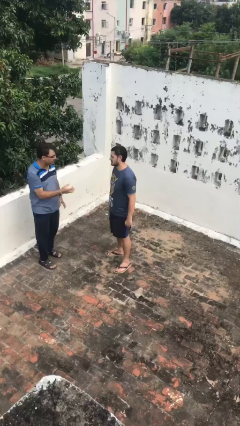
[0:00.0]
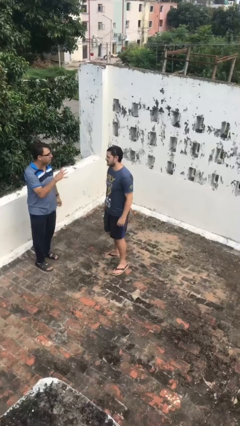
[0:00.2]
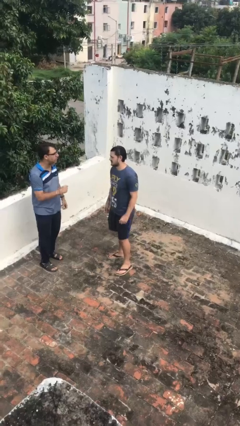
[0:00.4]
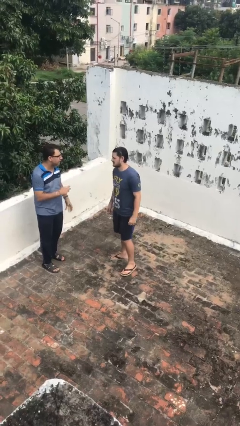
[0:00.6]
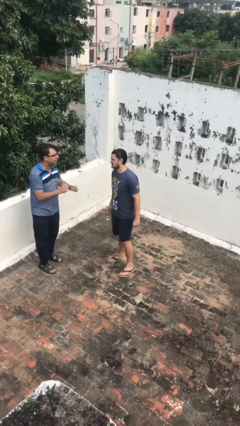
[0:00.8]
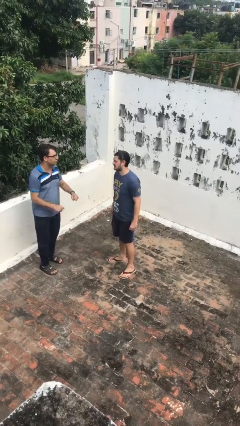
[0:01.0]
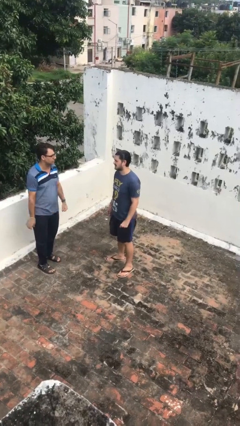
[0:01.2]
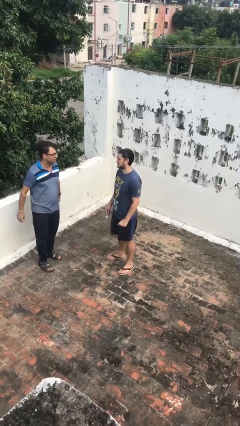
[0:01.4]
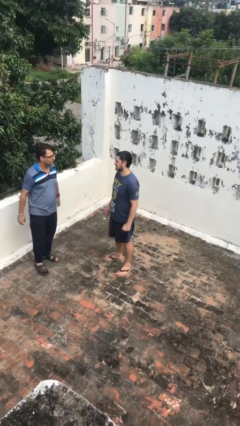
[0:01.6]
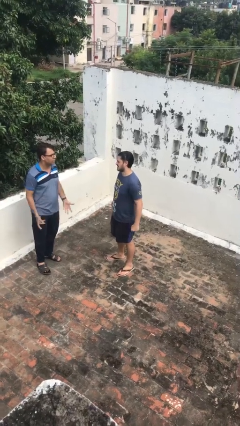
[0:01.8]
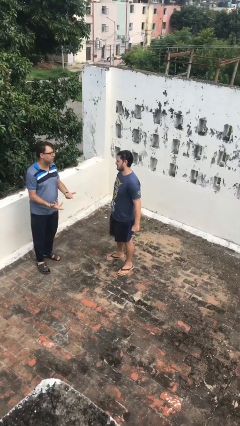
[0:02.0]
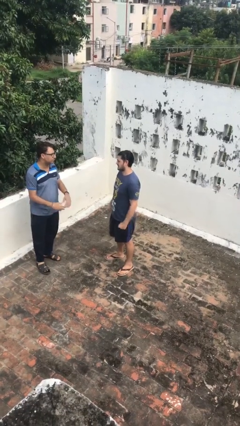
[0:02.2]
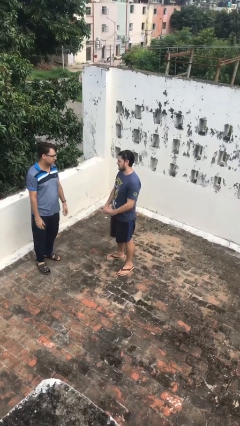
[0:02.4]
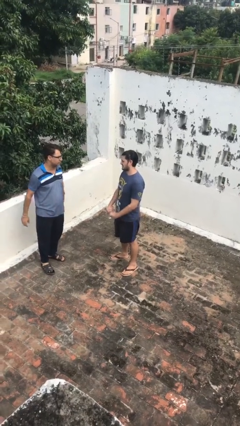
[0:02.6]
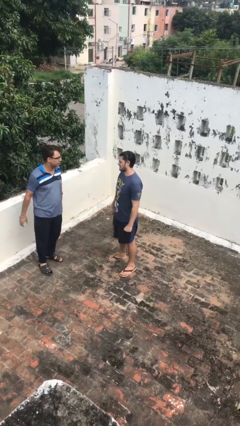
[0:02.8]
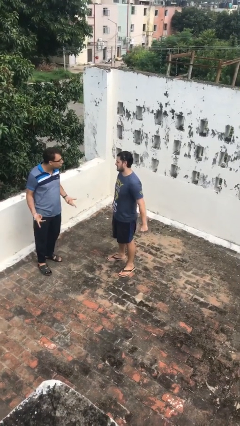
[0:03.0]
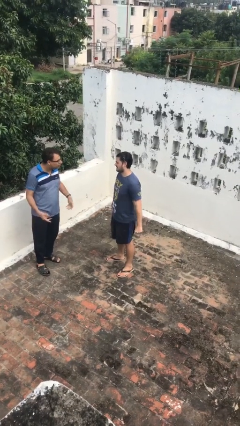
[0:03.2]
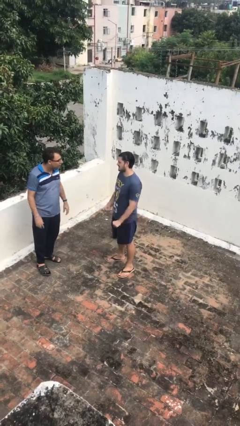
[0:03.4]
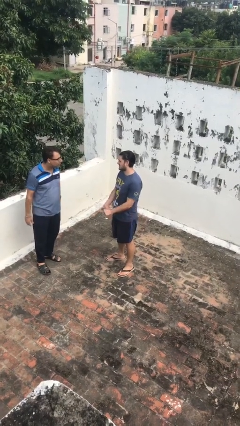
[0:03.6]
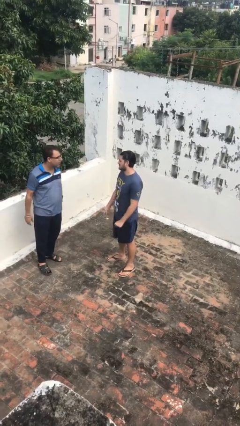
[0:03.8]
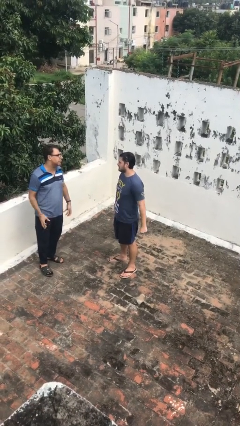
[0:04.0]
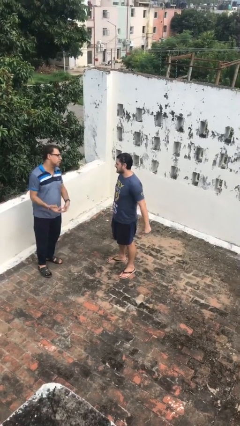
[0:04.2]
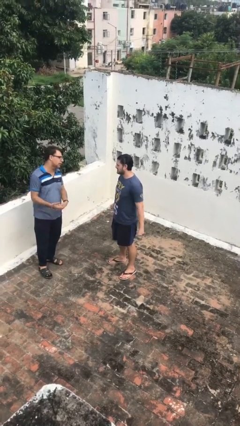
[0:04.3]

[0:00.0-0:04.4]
person talks to person

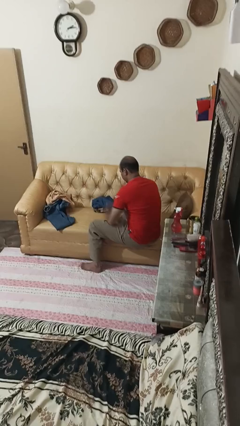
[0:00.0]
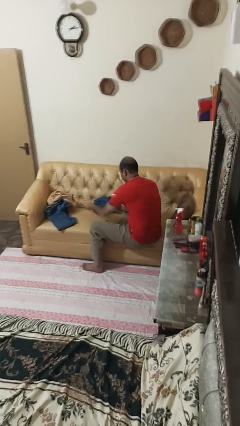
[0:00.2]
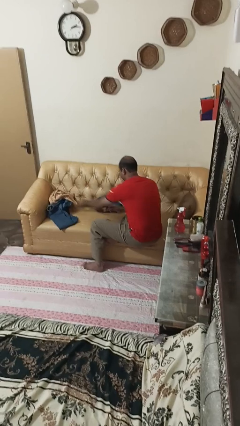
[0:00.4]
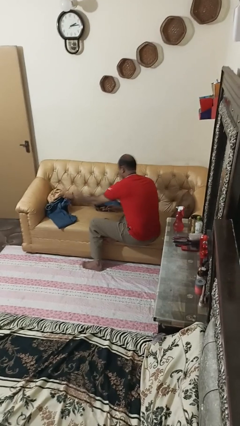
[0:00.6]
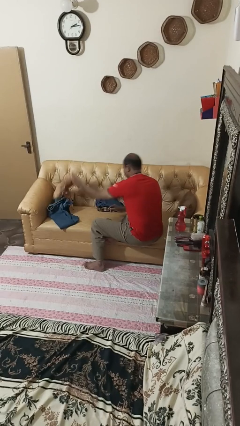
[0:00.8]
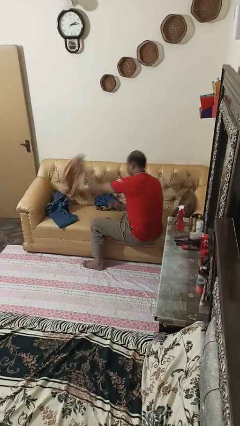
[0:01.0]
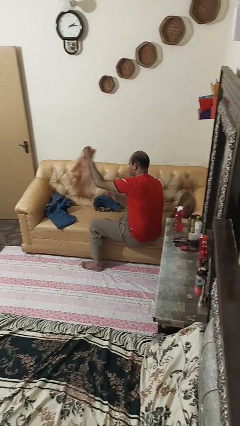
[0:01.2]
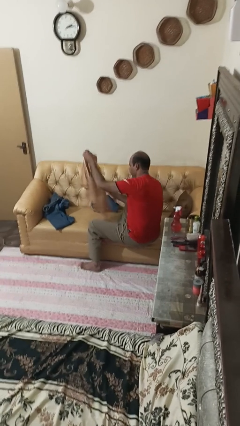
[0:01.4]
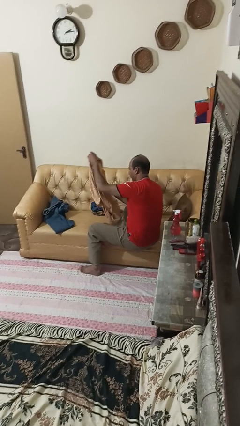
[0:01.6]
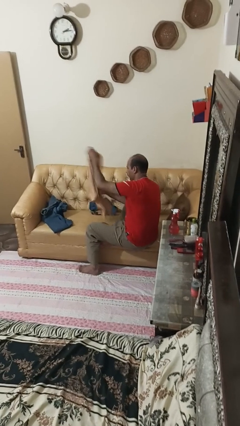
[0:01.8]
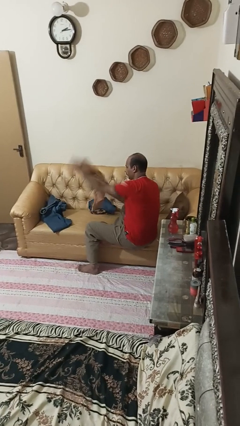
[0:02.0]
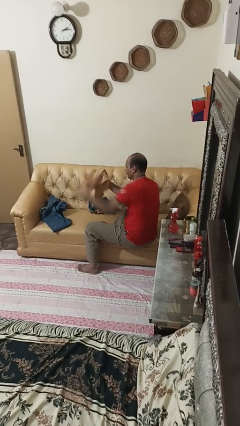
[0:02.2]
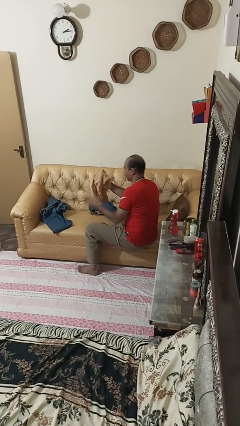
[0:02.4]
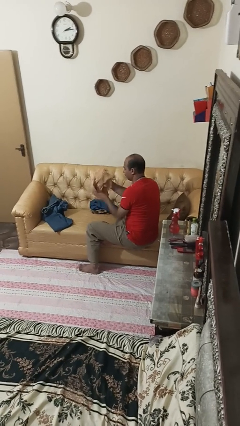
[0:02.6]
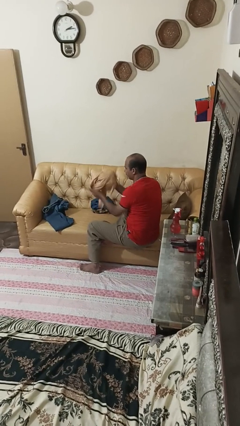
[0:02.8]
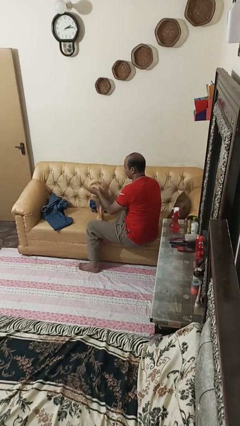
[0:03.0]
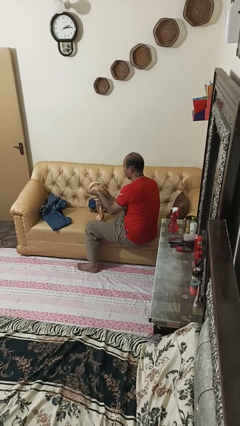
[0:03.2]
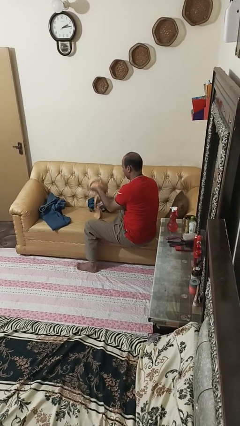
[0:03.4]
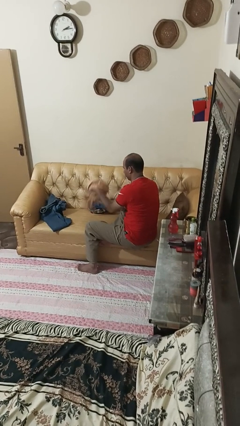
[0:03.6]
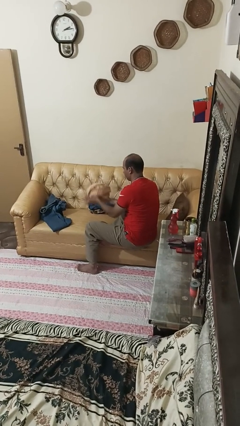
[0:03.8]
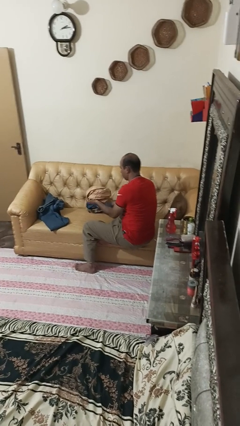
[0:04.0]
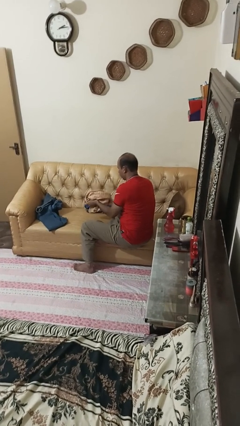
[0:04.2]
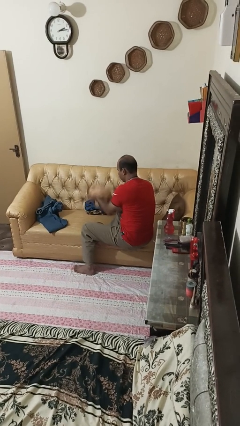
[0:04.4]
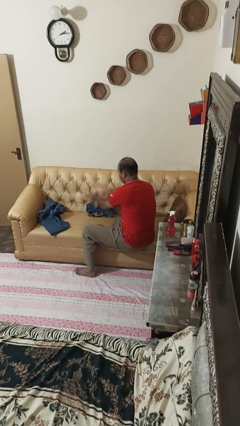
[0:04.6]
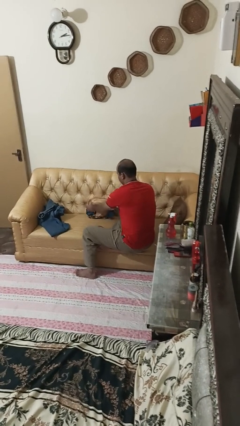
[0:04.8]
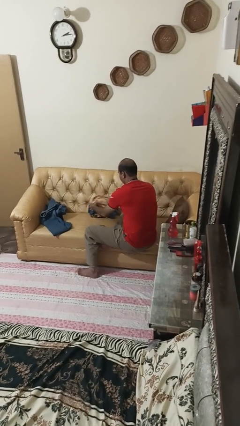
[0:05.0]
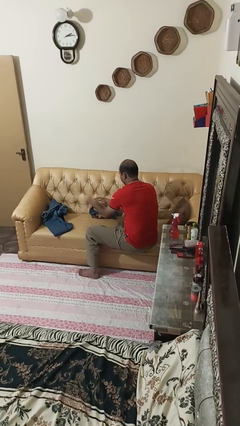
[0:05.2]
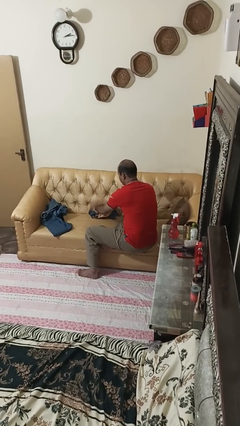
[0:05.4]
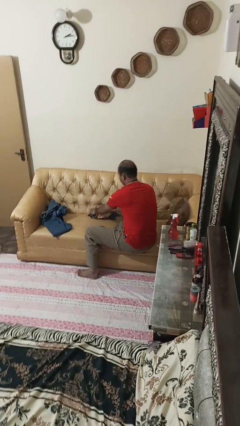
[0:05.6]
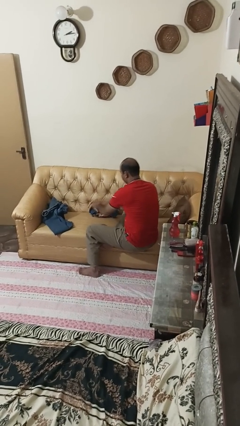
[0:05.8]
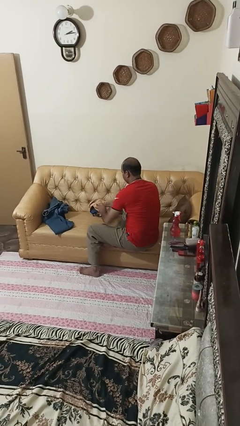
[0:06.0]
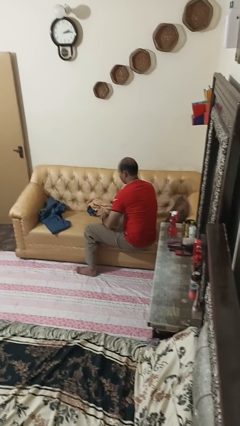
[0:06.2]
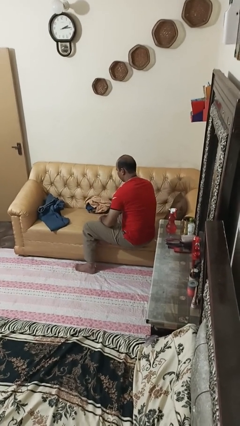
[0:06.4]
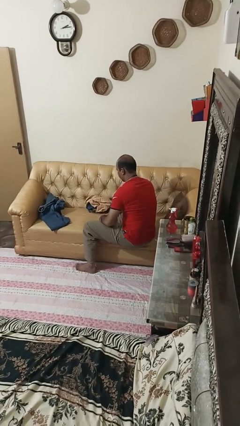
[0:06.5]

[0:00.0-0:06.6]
person folds shirt

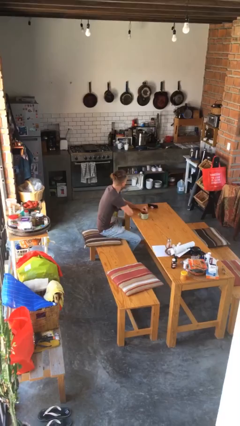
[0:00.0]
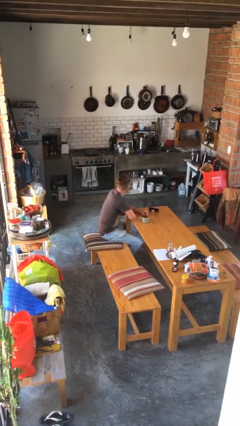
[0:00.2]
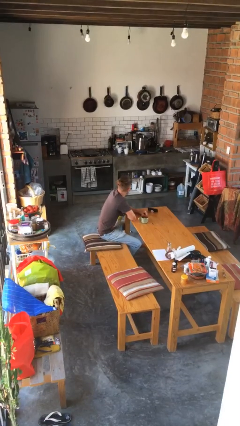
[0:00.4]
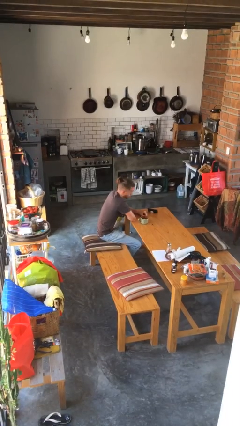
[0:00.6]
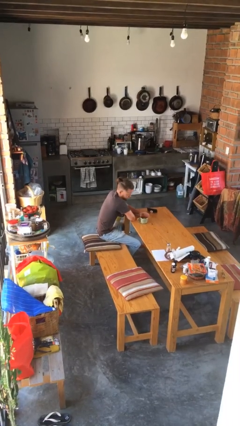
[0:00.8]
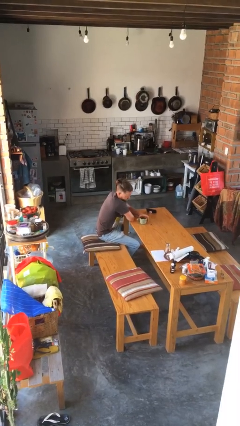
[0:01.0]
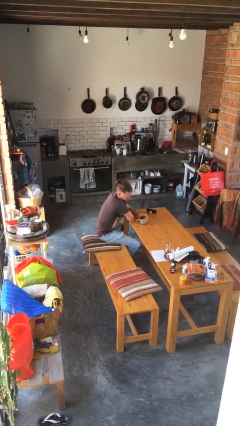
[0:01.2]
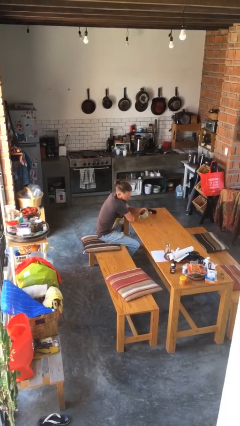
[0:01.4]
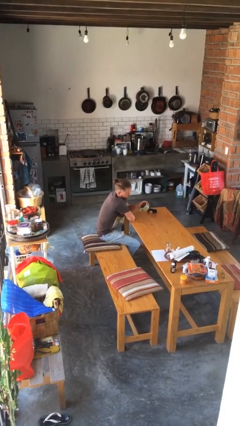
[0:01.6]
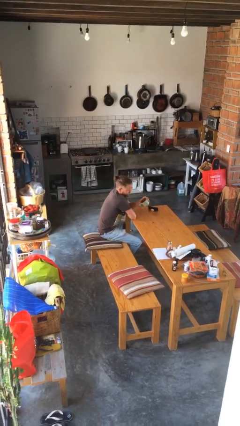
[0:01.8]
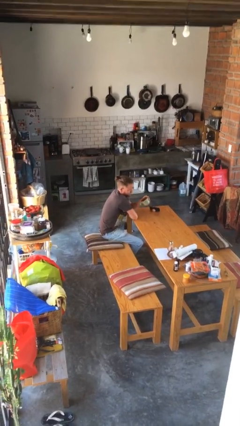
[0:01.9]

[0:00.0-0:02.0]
person picks up object from table

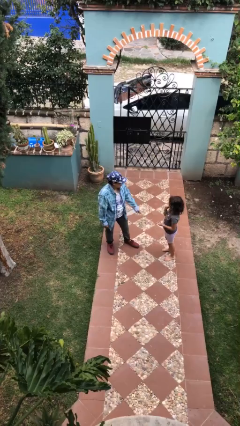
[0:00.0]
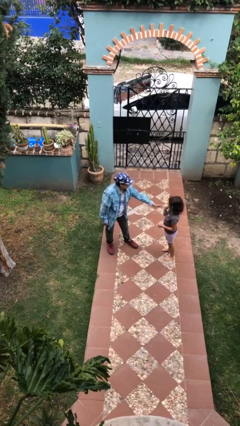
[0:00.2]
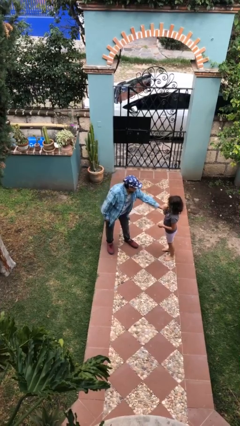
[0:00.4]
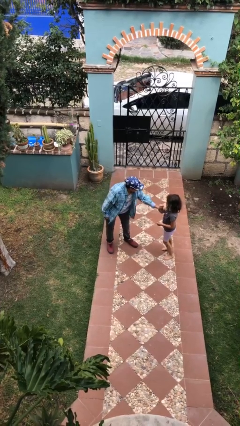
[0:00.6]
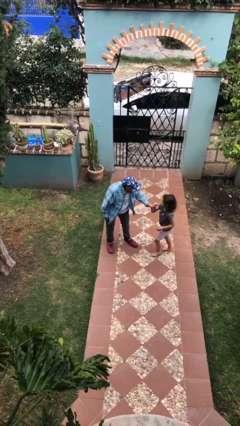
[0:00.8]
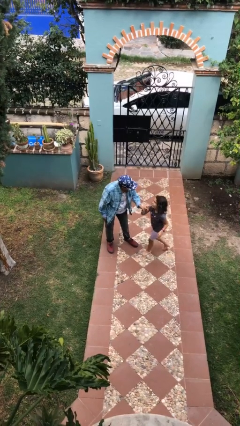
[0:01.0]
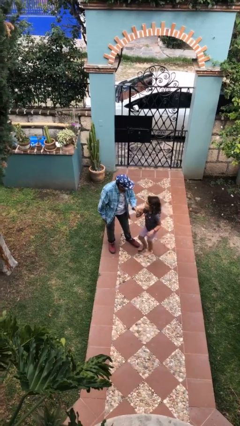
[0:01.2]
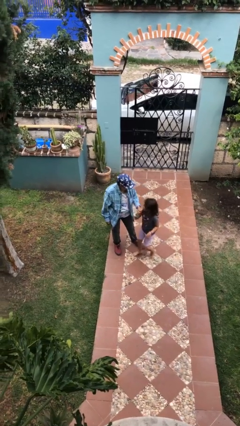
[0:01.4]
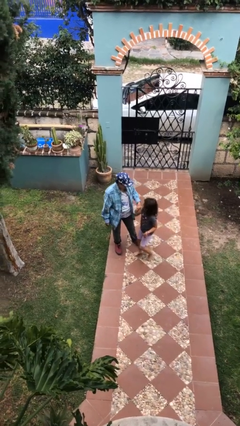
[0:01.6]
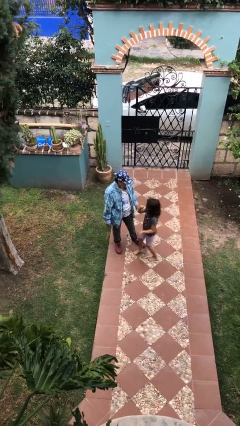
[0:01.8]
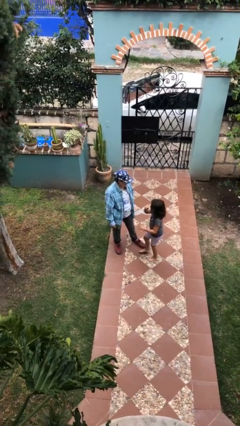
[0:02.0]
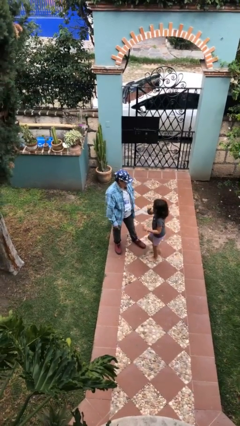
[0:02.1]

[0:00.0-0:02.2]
person grabs person by forearm

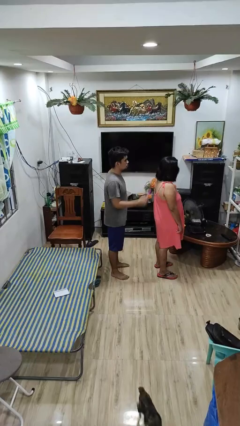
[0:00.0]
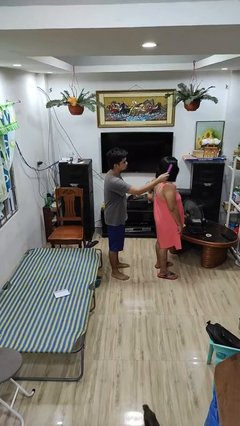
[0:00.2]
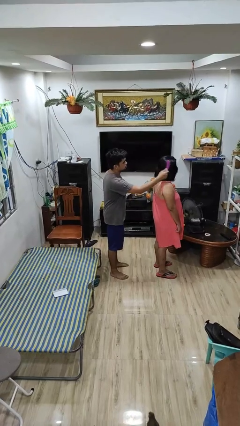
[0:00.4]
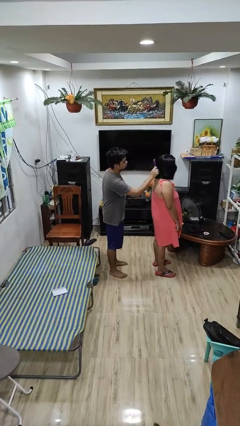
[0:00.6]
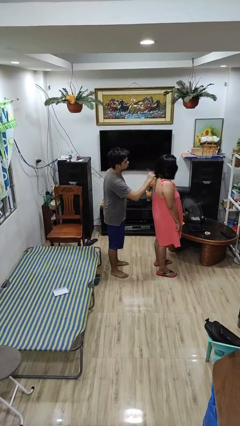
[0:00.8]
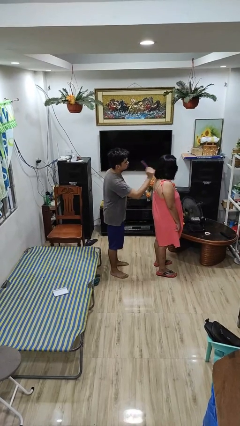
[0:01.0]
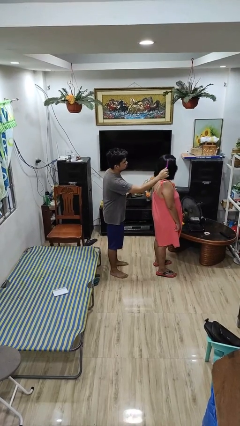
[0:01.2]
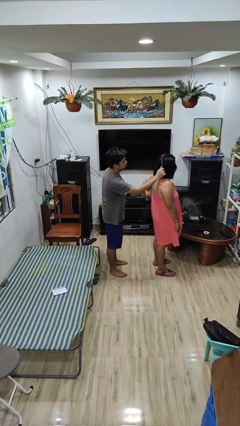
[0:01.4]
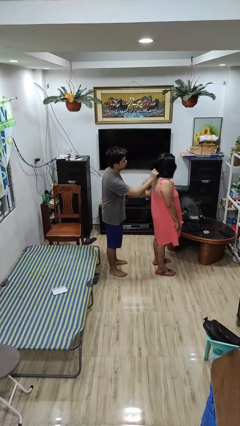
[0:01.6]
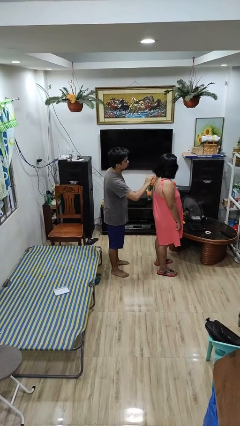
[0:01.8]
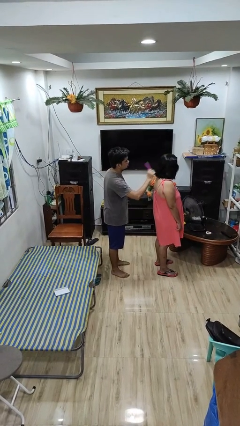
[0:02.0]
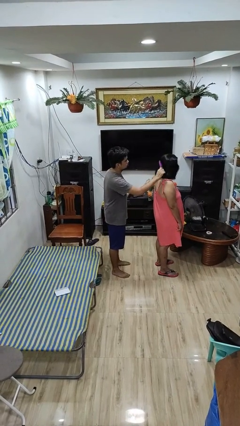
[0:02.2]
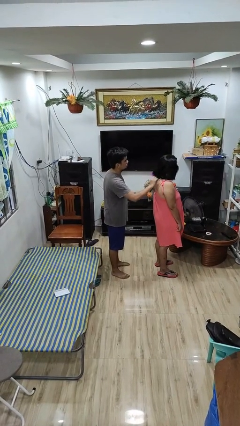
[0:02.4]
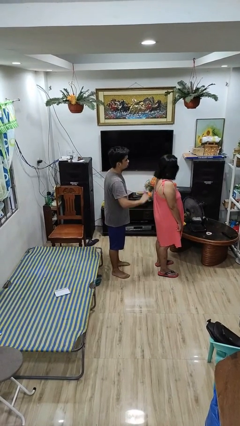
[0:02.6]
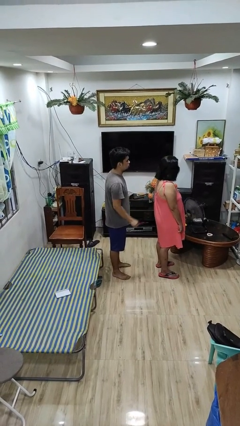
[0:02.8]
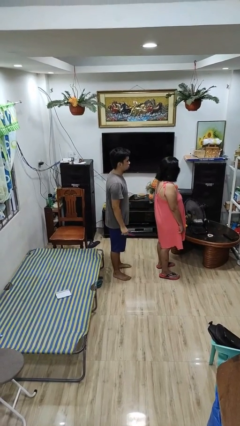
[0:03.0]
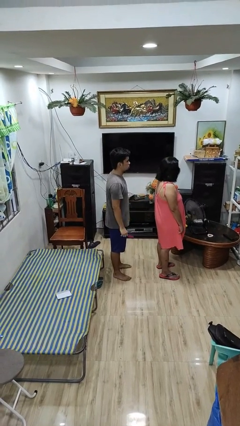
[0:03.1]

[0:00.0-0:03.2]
person brushes hair of person
